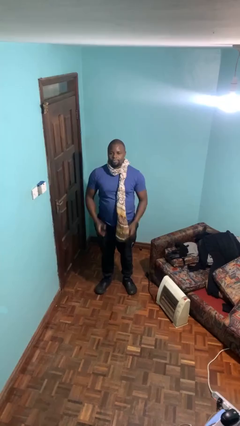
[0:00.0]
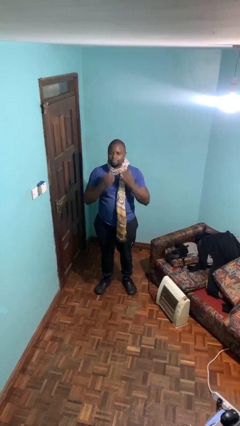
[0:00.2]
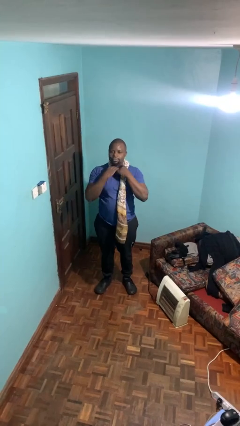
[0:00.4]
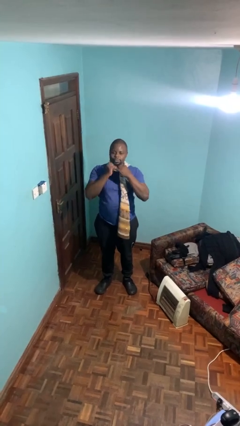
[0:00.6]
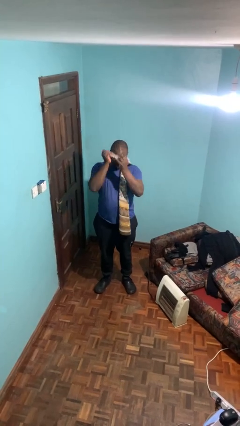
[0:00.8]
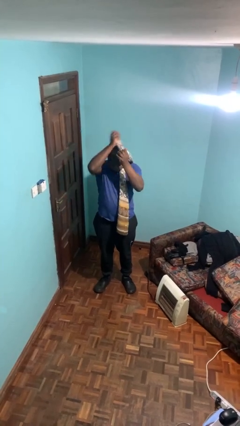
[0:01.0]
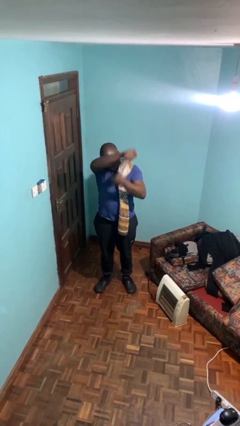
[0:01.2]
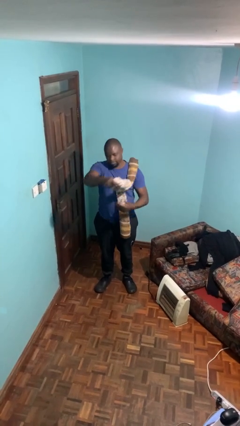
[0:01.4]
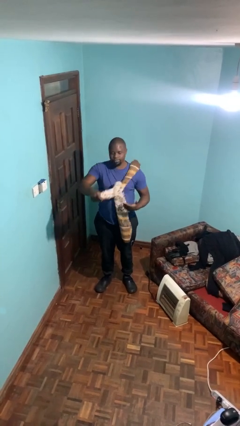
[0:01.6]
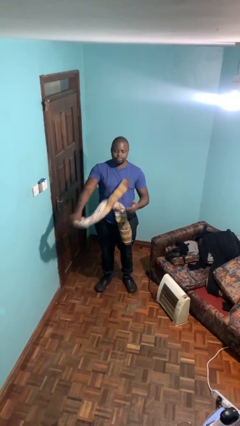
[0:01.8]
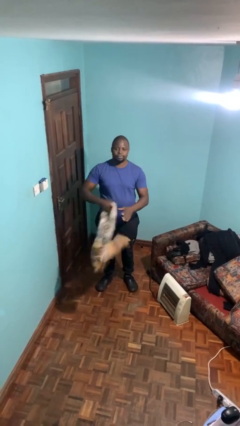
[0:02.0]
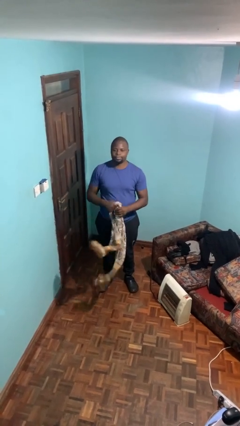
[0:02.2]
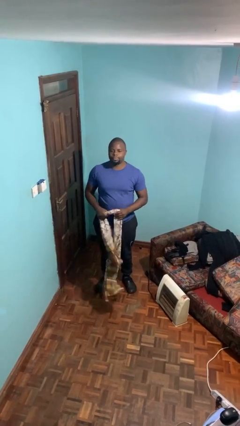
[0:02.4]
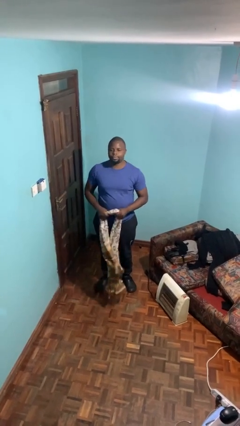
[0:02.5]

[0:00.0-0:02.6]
person takes off scarf

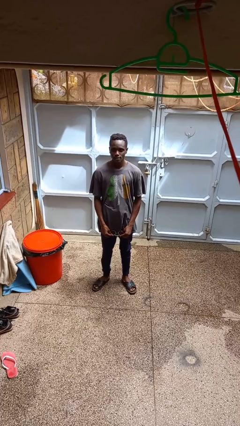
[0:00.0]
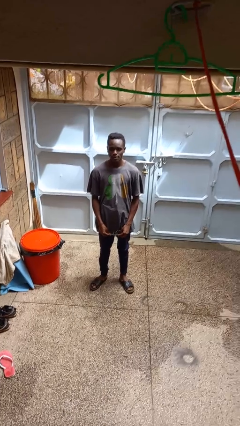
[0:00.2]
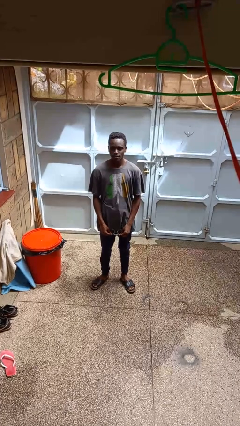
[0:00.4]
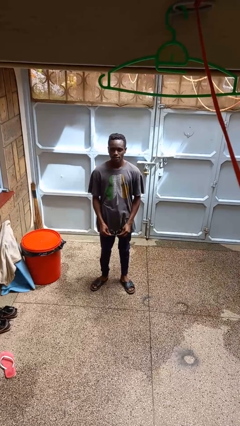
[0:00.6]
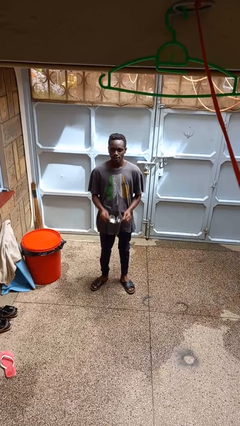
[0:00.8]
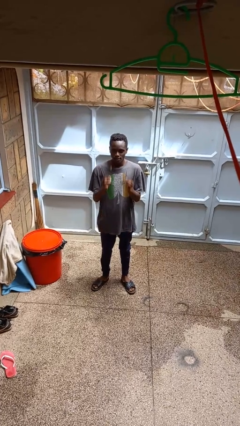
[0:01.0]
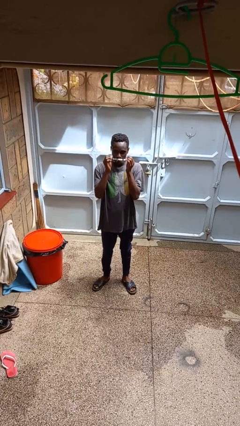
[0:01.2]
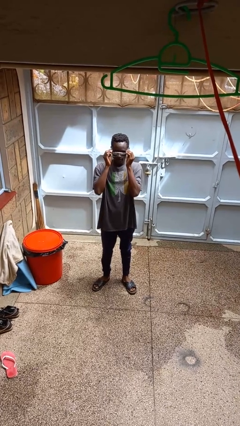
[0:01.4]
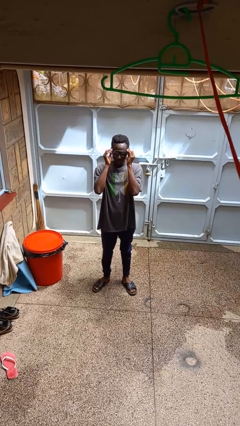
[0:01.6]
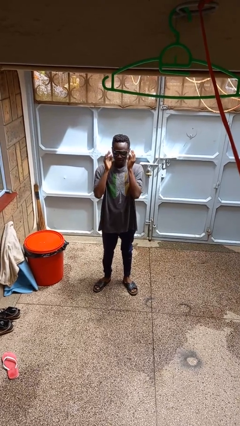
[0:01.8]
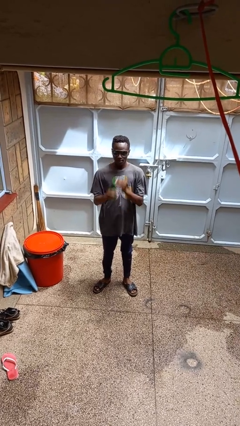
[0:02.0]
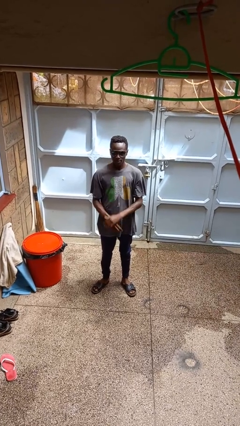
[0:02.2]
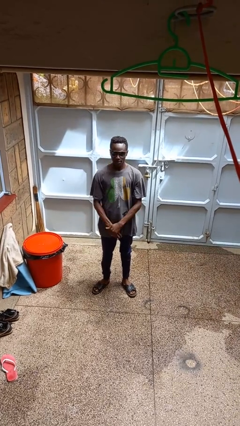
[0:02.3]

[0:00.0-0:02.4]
person puts on sunglasses

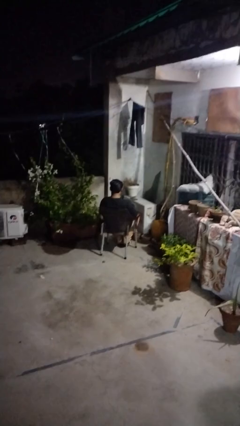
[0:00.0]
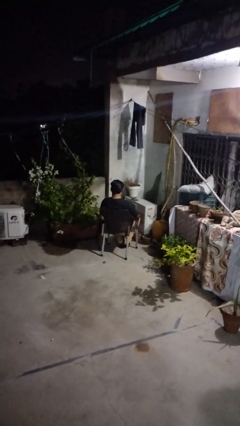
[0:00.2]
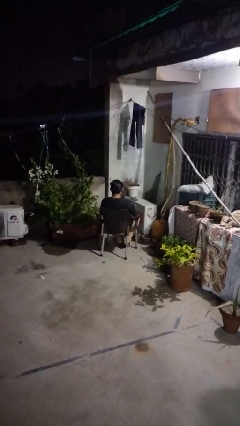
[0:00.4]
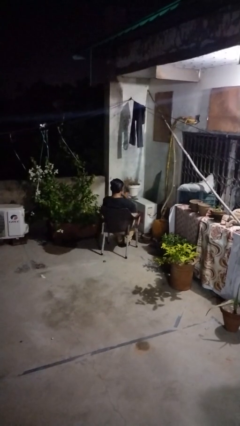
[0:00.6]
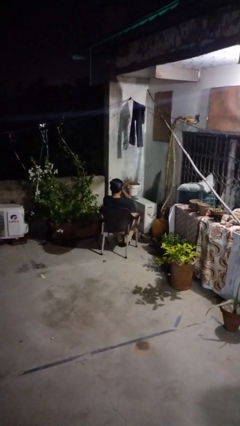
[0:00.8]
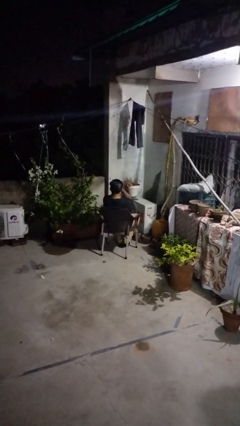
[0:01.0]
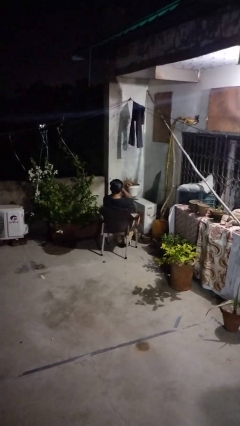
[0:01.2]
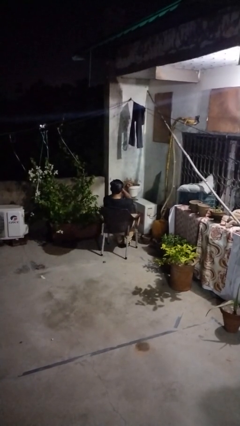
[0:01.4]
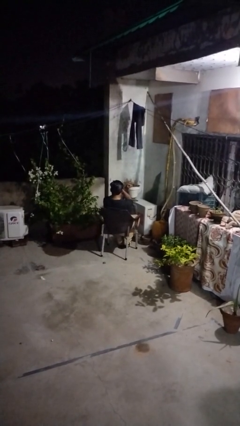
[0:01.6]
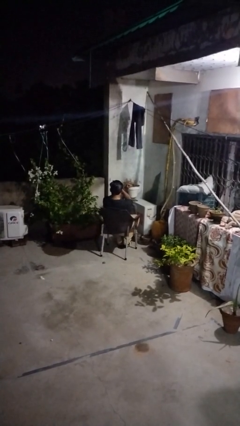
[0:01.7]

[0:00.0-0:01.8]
person gestures arms x

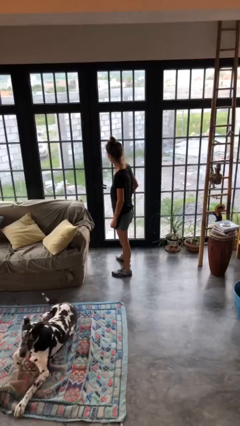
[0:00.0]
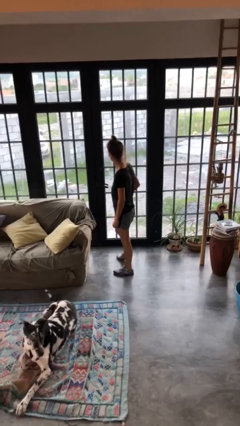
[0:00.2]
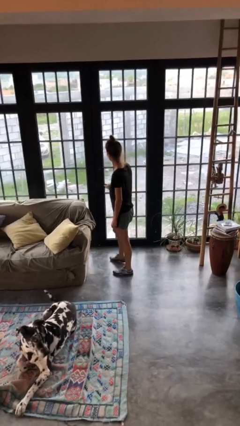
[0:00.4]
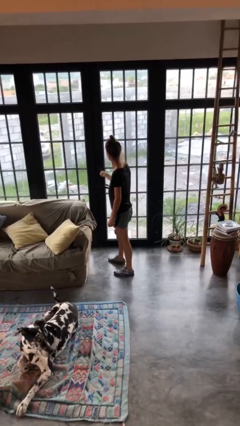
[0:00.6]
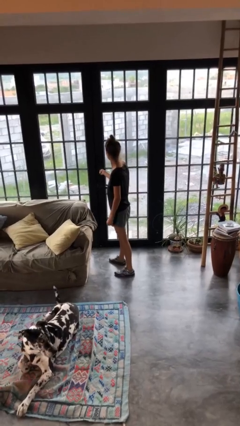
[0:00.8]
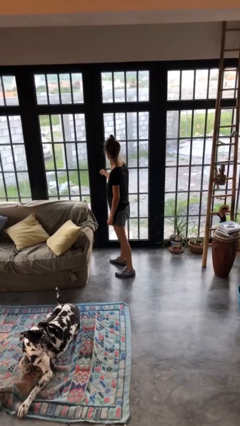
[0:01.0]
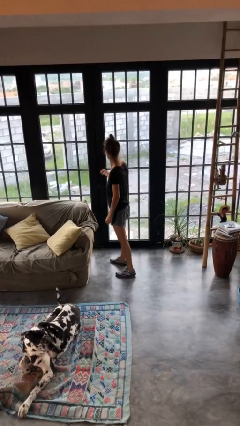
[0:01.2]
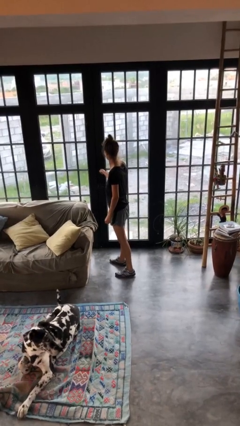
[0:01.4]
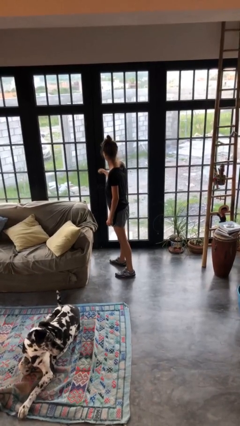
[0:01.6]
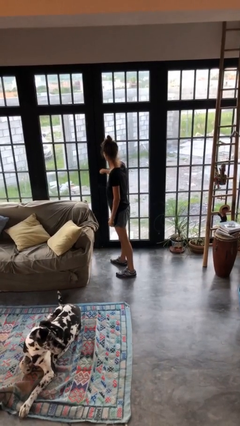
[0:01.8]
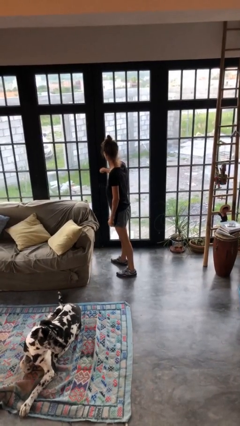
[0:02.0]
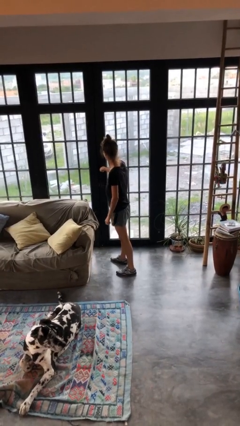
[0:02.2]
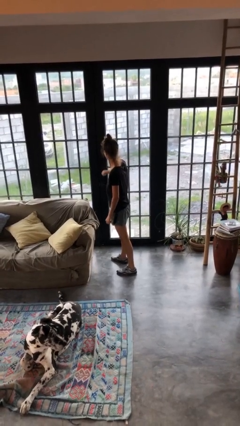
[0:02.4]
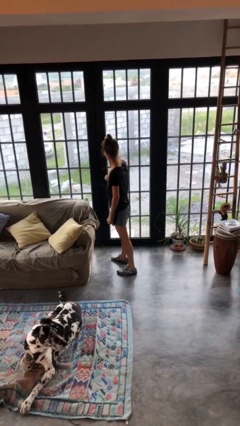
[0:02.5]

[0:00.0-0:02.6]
person locks door with keys

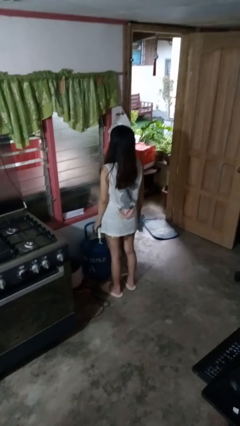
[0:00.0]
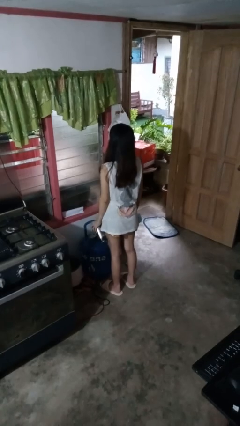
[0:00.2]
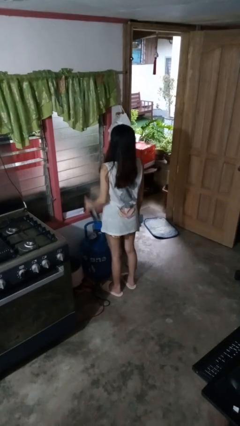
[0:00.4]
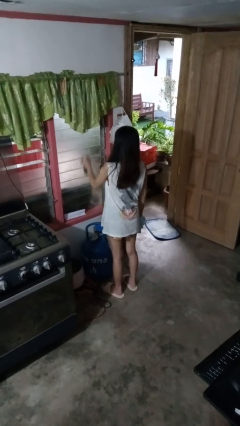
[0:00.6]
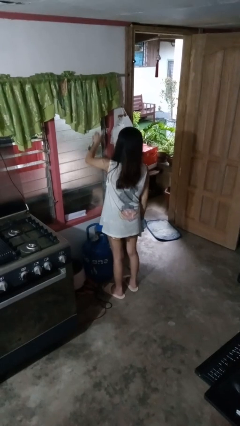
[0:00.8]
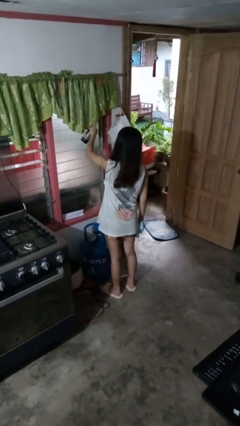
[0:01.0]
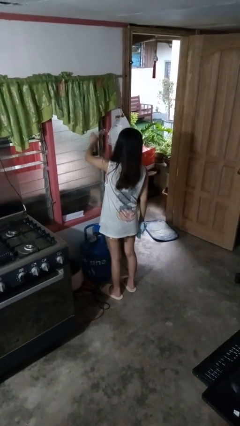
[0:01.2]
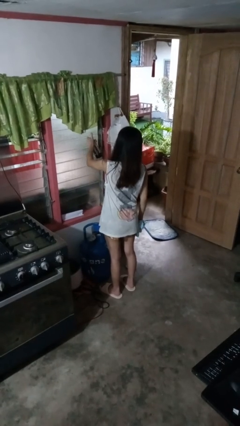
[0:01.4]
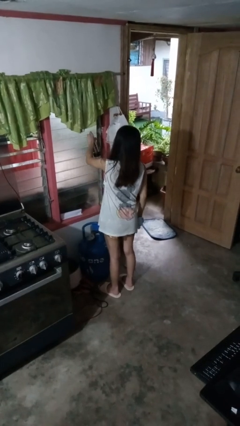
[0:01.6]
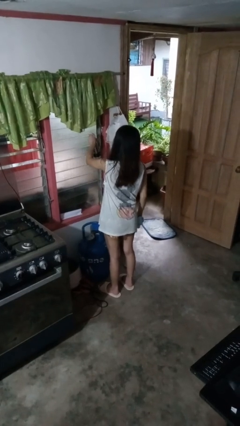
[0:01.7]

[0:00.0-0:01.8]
person sprays from bottle

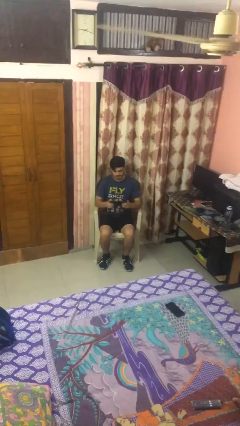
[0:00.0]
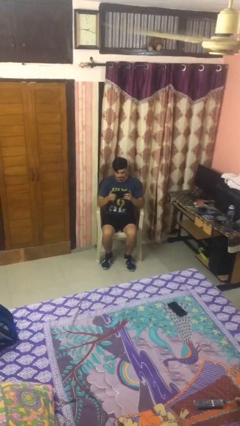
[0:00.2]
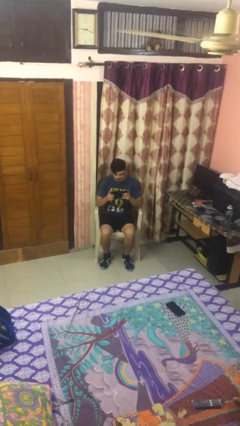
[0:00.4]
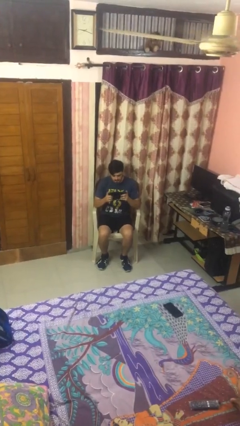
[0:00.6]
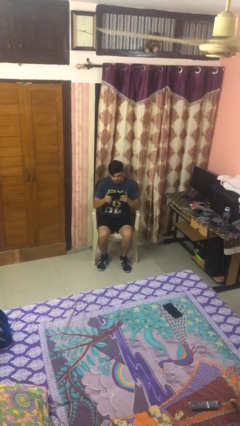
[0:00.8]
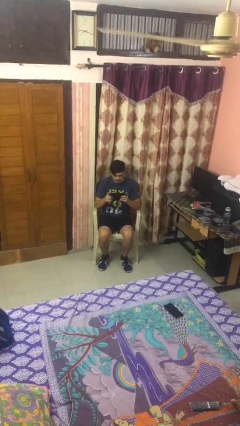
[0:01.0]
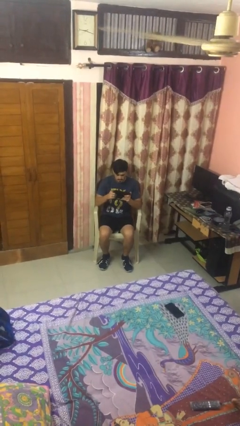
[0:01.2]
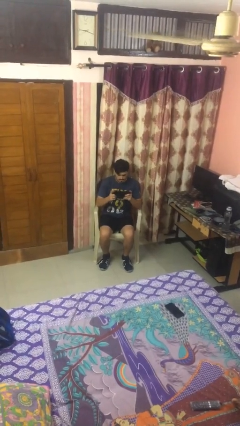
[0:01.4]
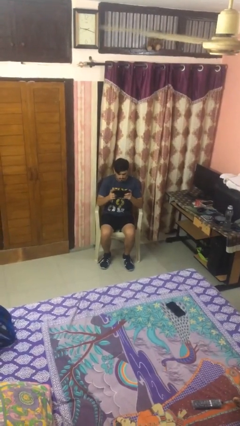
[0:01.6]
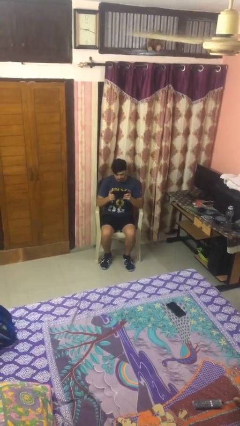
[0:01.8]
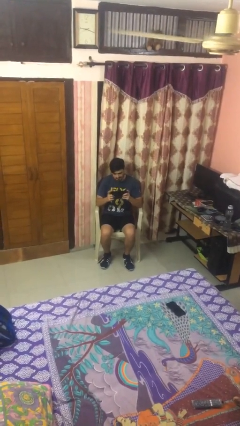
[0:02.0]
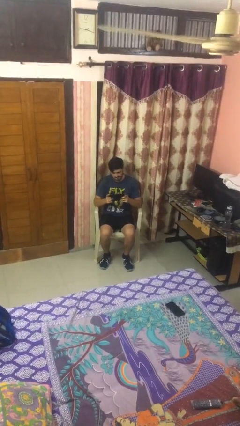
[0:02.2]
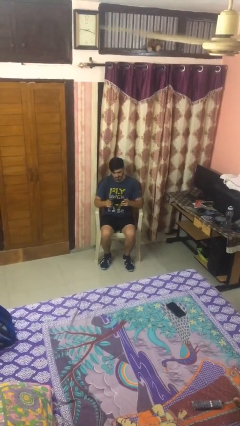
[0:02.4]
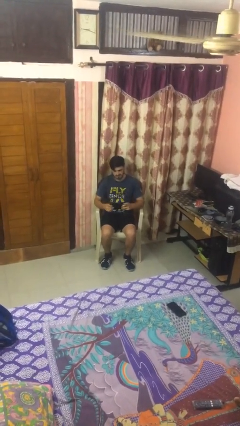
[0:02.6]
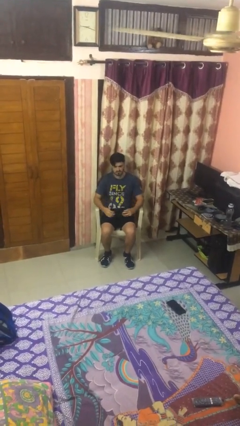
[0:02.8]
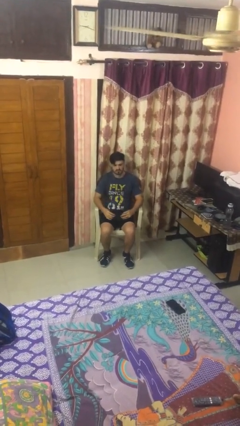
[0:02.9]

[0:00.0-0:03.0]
person interacts with handheld game

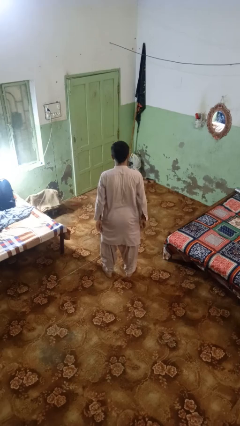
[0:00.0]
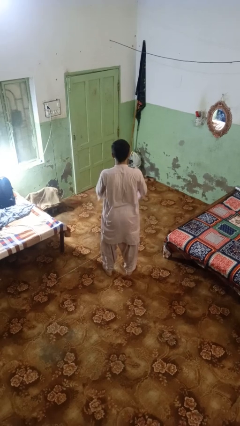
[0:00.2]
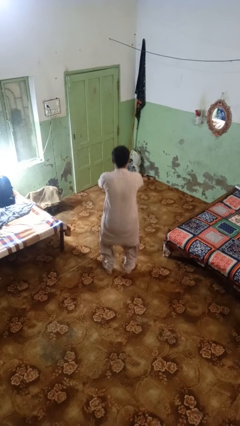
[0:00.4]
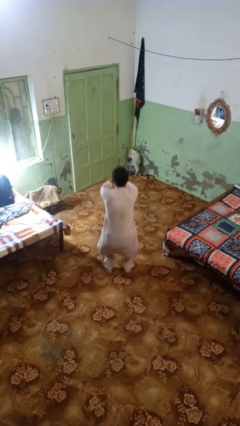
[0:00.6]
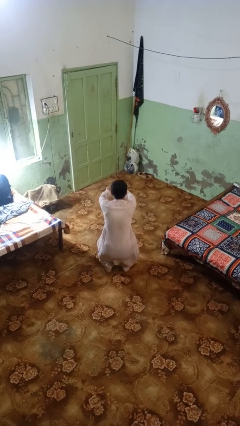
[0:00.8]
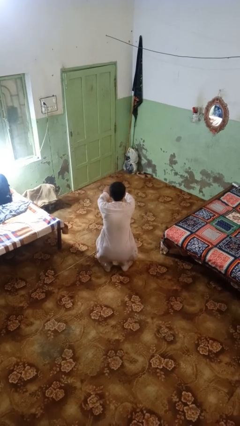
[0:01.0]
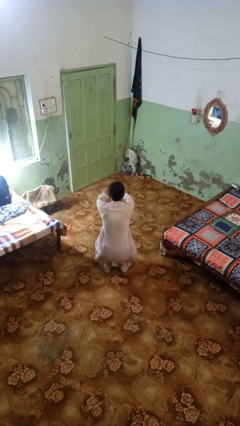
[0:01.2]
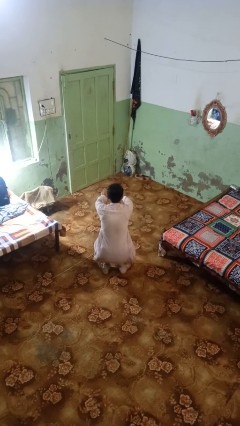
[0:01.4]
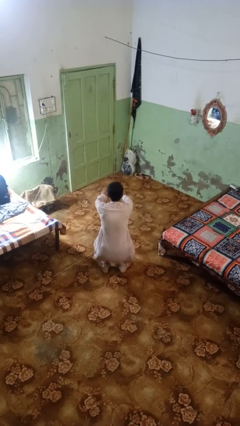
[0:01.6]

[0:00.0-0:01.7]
person squats

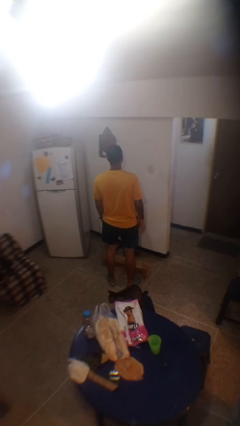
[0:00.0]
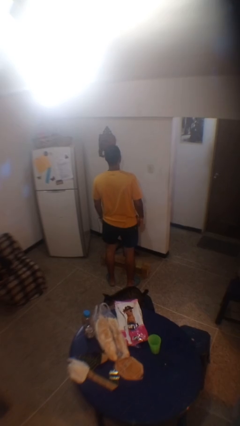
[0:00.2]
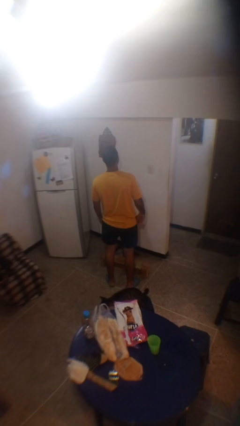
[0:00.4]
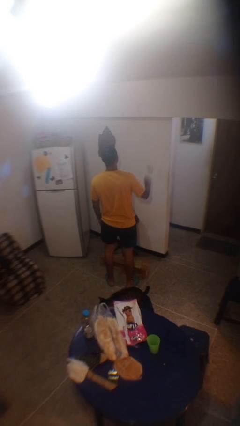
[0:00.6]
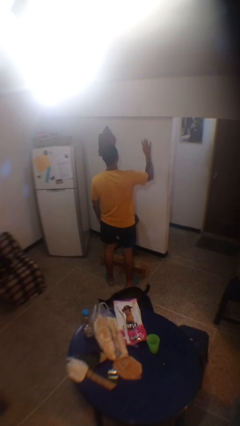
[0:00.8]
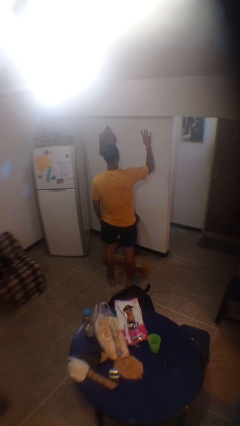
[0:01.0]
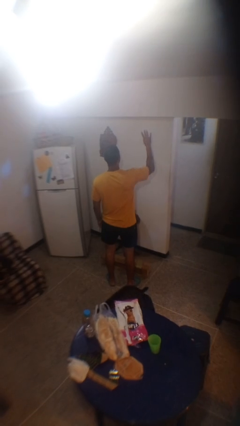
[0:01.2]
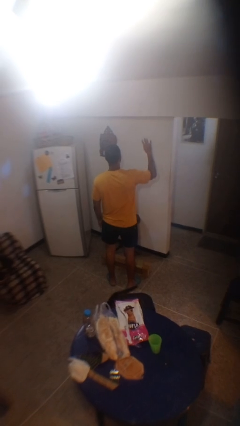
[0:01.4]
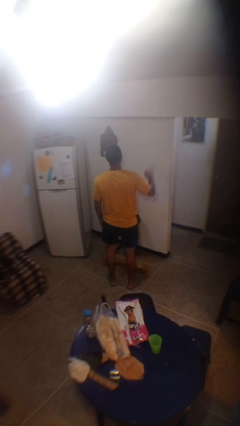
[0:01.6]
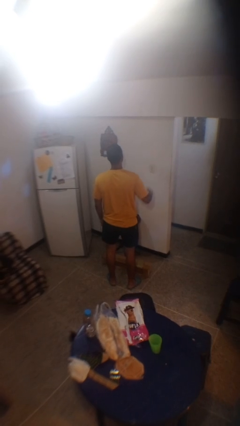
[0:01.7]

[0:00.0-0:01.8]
person gestures number four
